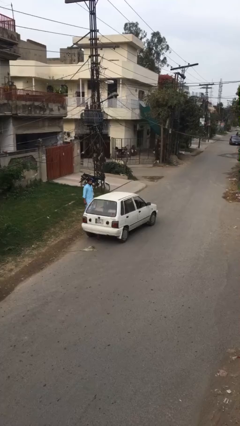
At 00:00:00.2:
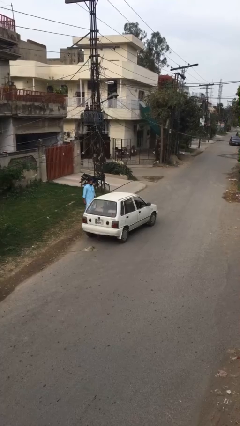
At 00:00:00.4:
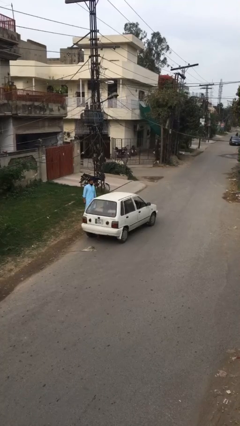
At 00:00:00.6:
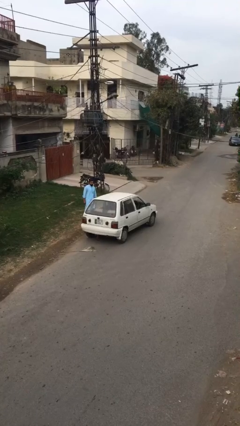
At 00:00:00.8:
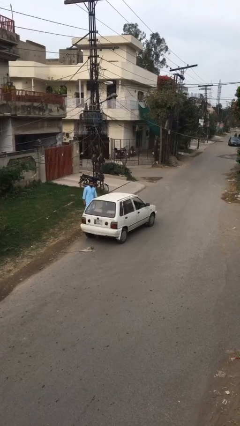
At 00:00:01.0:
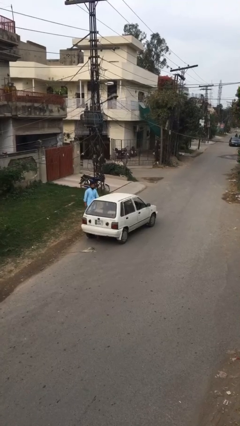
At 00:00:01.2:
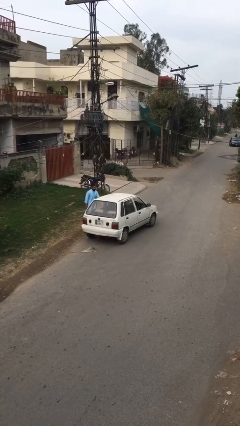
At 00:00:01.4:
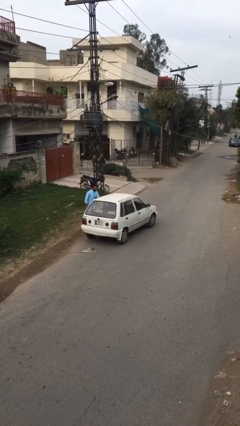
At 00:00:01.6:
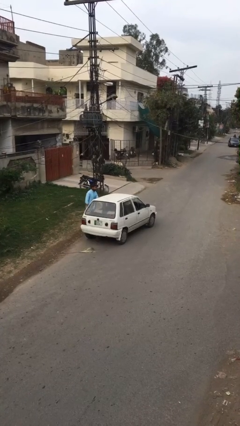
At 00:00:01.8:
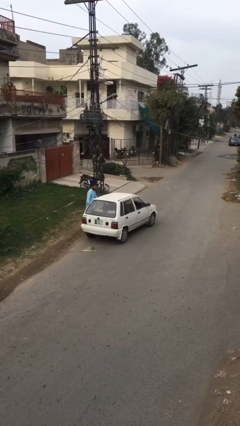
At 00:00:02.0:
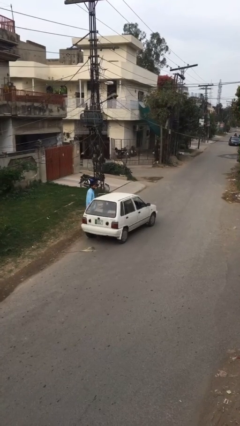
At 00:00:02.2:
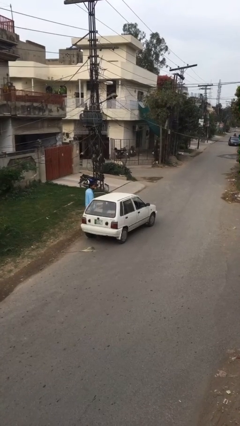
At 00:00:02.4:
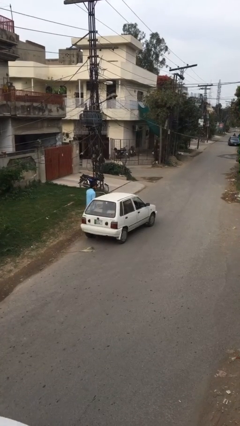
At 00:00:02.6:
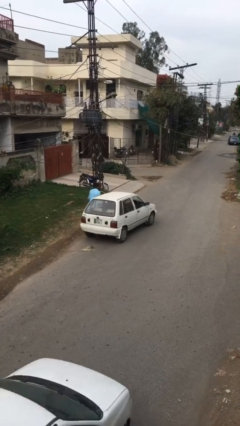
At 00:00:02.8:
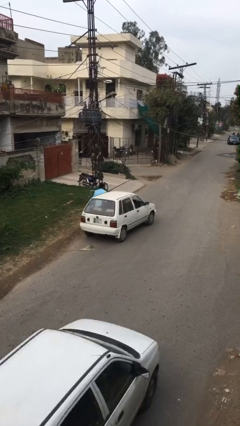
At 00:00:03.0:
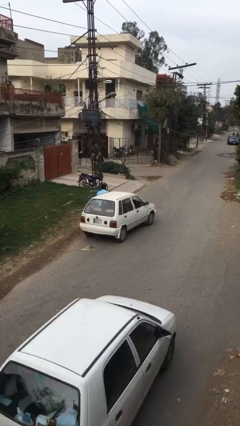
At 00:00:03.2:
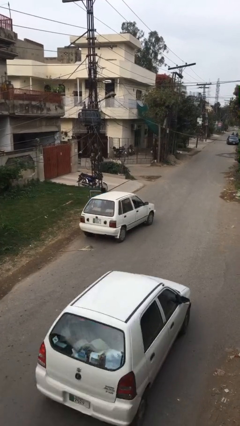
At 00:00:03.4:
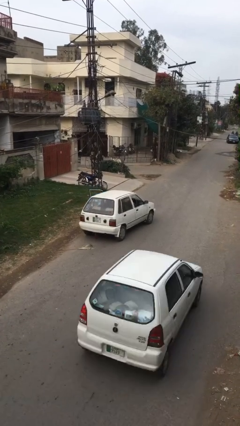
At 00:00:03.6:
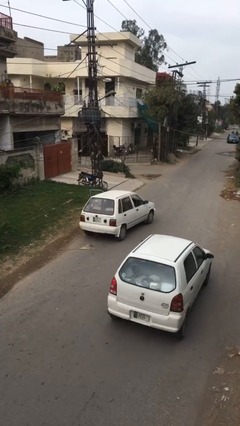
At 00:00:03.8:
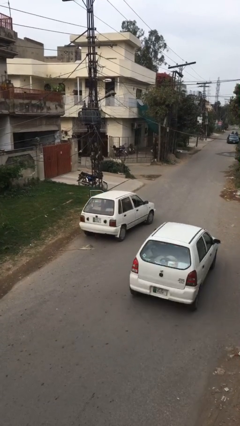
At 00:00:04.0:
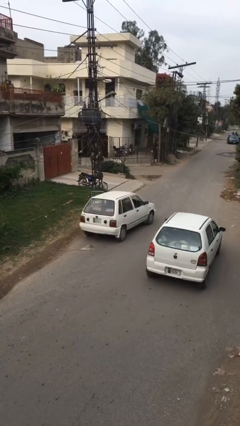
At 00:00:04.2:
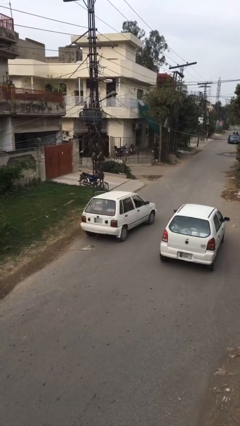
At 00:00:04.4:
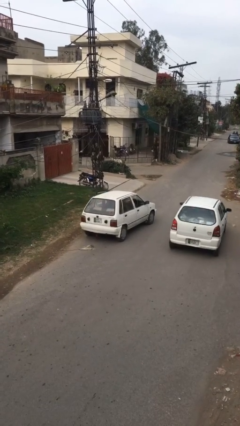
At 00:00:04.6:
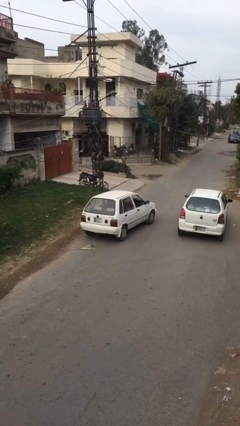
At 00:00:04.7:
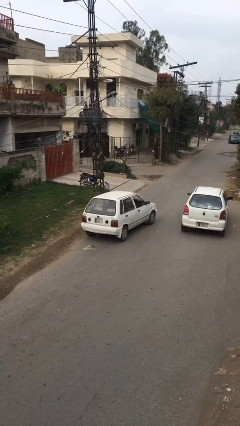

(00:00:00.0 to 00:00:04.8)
car picks up person

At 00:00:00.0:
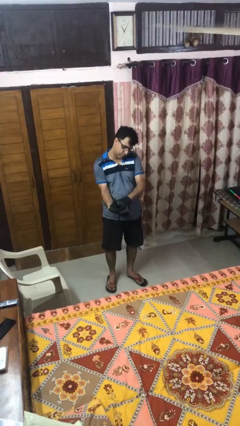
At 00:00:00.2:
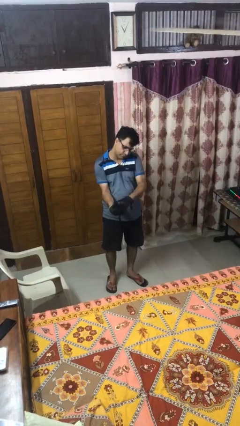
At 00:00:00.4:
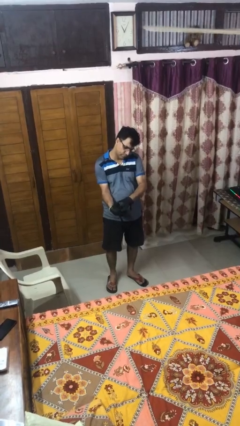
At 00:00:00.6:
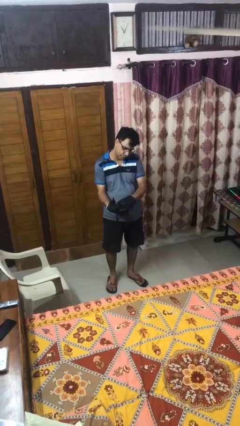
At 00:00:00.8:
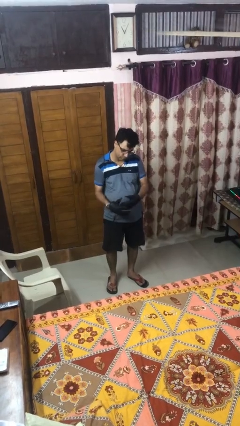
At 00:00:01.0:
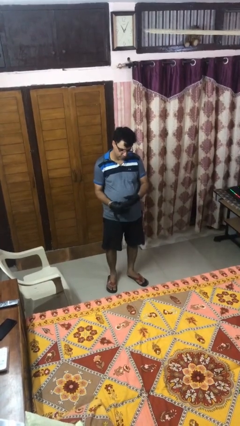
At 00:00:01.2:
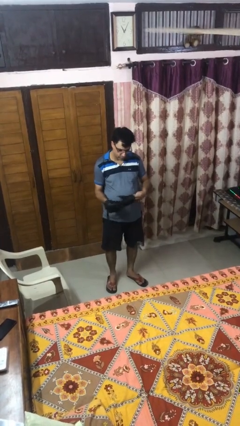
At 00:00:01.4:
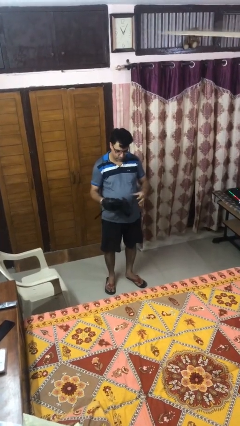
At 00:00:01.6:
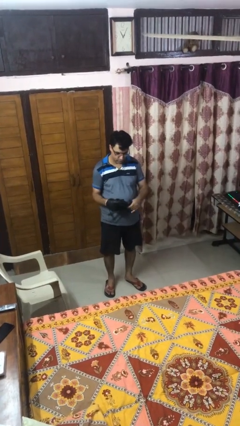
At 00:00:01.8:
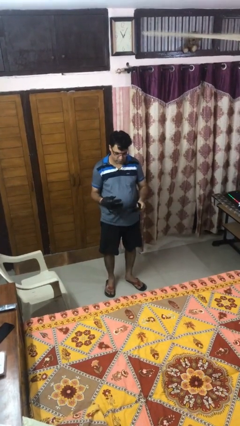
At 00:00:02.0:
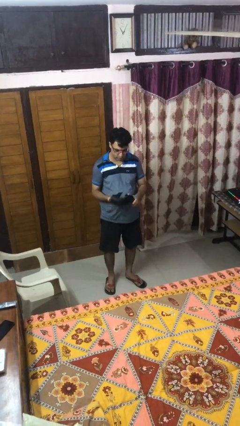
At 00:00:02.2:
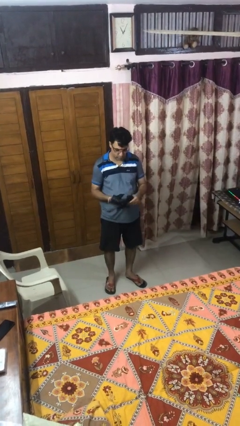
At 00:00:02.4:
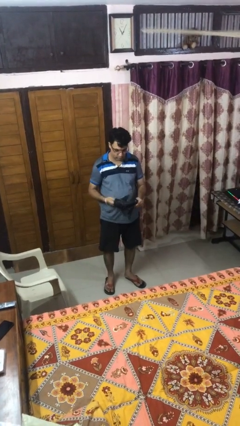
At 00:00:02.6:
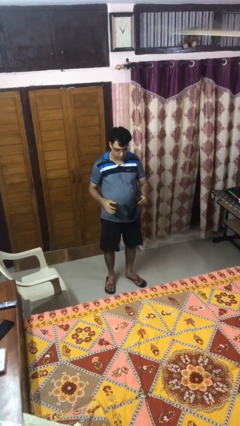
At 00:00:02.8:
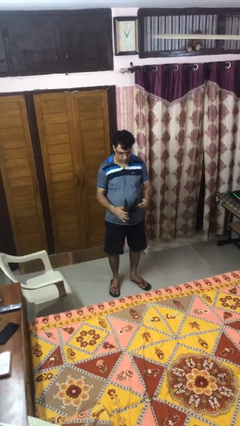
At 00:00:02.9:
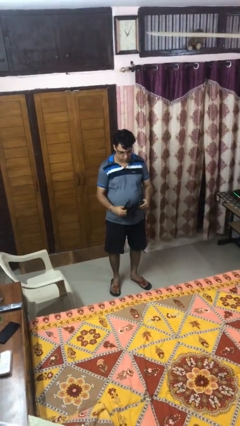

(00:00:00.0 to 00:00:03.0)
person takes off gloves

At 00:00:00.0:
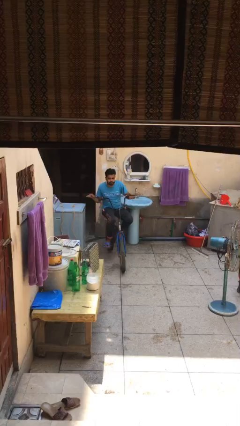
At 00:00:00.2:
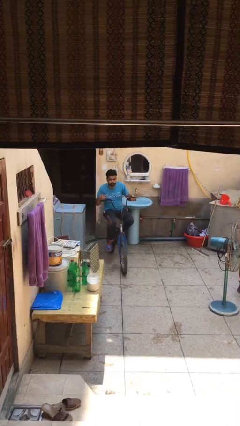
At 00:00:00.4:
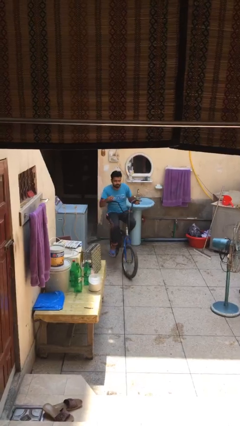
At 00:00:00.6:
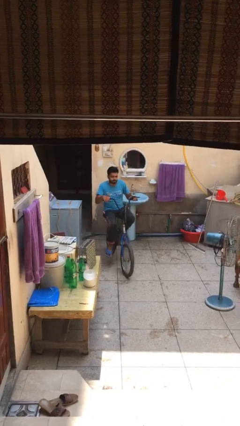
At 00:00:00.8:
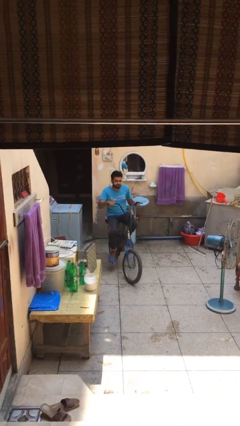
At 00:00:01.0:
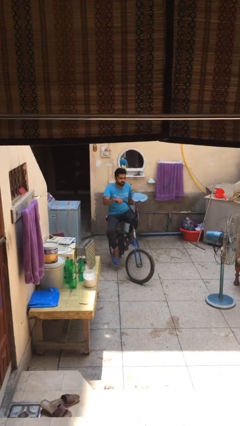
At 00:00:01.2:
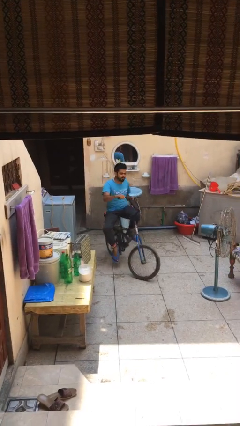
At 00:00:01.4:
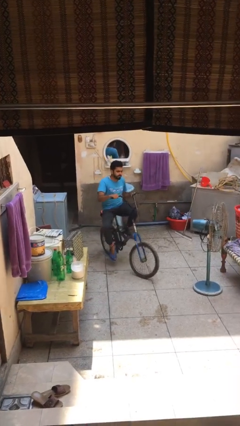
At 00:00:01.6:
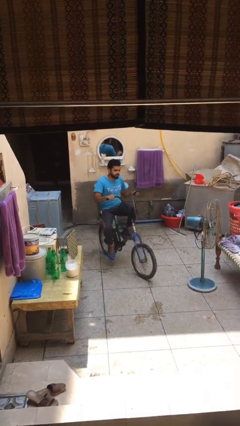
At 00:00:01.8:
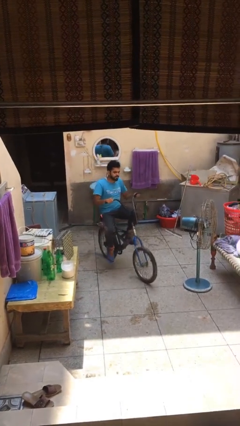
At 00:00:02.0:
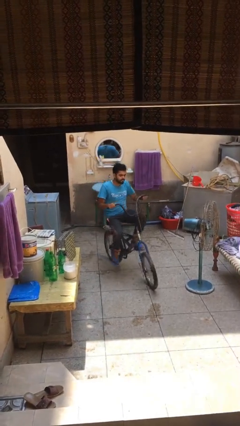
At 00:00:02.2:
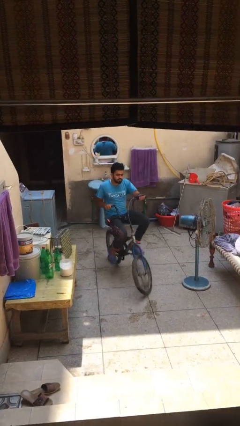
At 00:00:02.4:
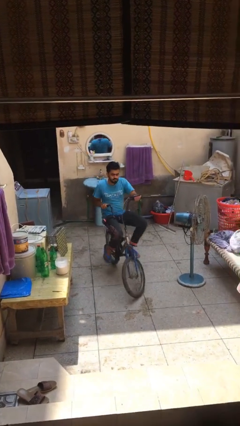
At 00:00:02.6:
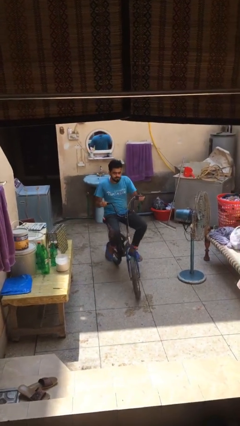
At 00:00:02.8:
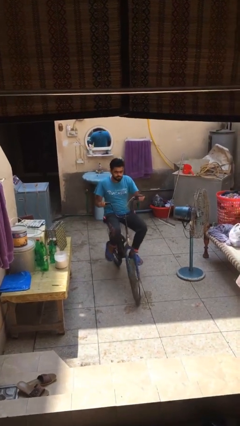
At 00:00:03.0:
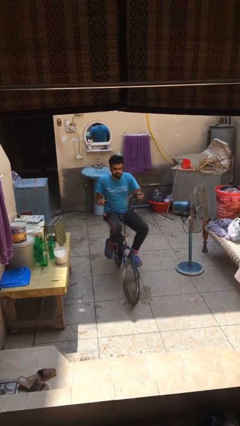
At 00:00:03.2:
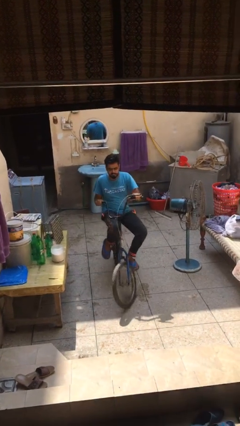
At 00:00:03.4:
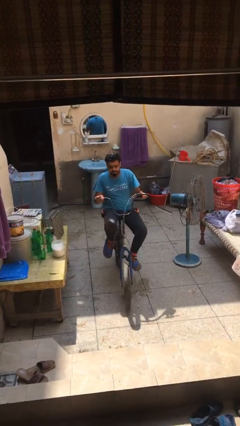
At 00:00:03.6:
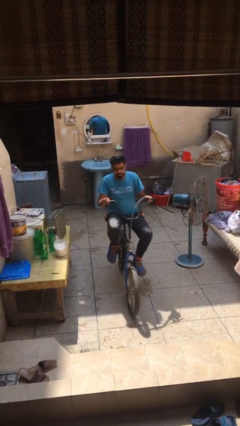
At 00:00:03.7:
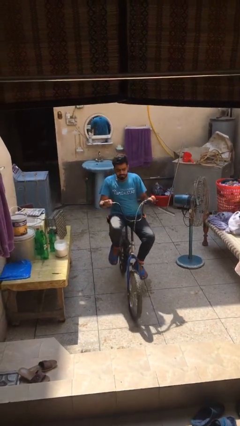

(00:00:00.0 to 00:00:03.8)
person rides bicycle

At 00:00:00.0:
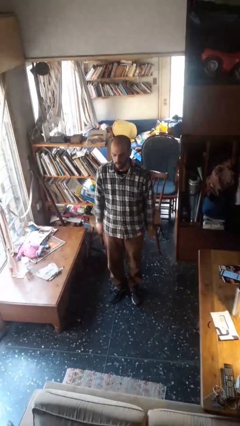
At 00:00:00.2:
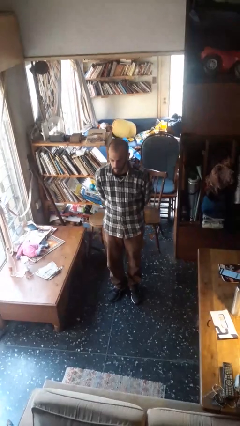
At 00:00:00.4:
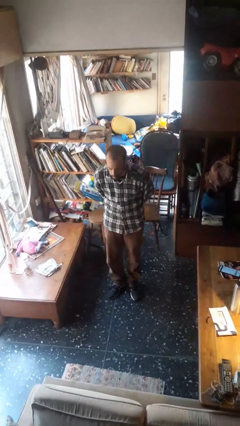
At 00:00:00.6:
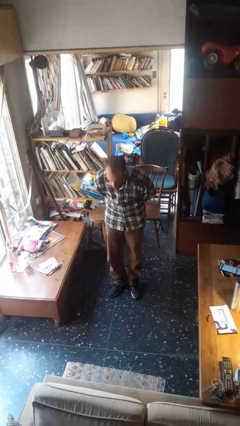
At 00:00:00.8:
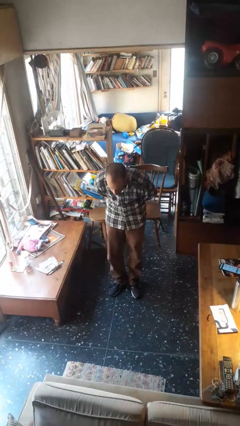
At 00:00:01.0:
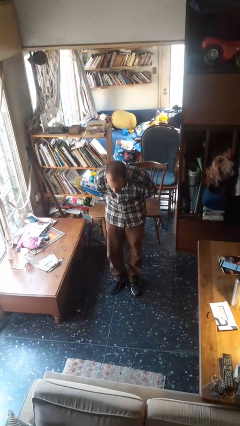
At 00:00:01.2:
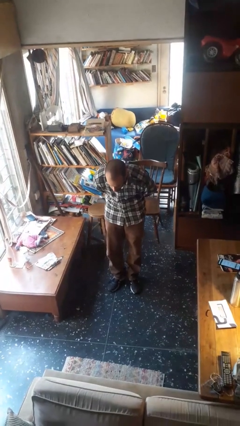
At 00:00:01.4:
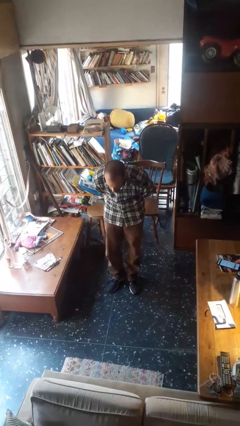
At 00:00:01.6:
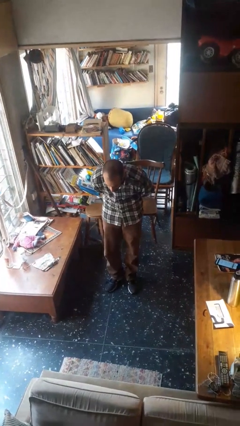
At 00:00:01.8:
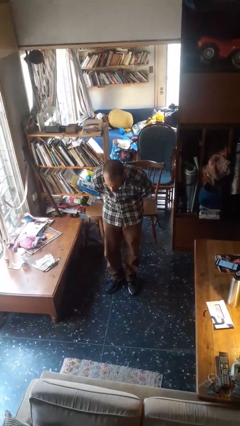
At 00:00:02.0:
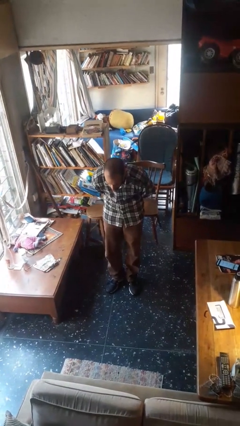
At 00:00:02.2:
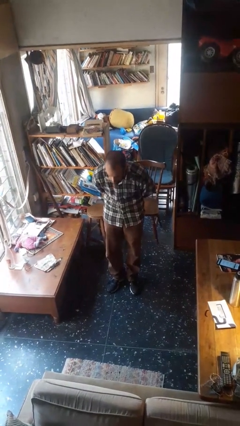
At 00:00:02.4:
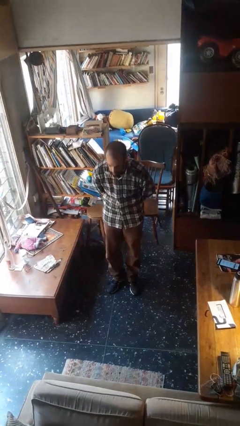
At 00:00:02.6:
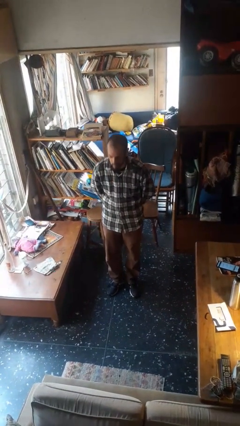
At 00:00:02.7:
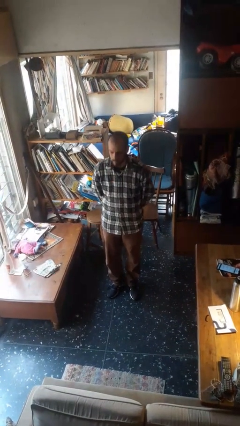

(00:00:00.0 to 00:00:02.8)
person bows

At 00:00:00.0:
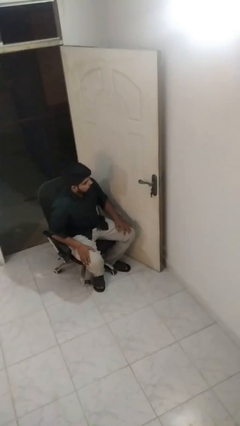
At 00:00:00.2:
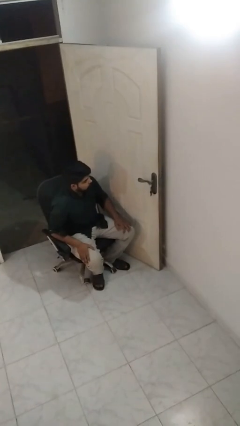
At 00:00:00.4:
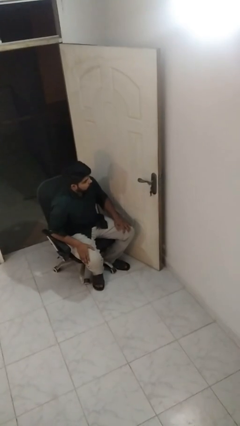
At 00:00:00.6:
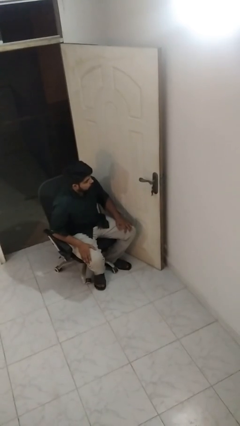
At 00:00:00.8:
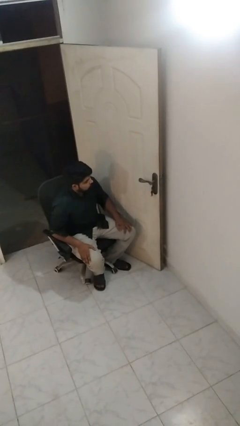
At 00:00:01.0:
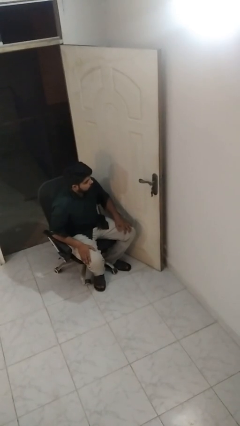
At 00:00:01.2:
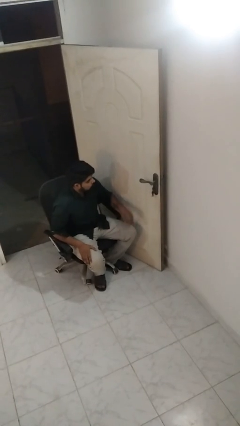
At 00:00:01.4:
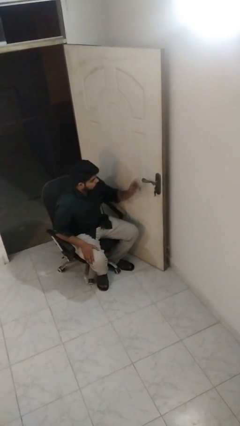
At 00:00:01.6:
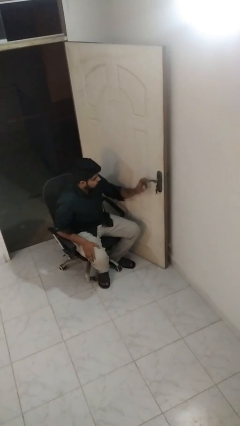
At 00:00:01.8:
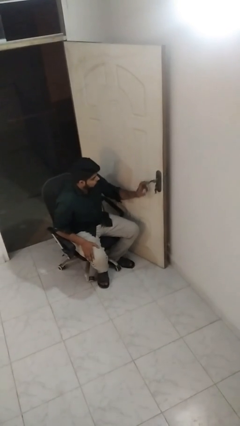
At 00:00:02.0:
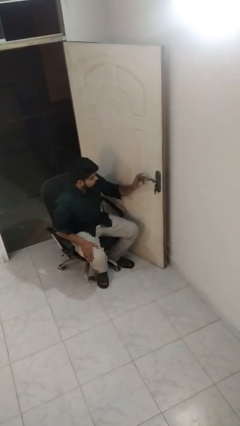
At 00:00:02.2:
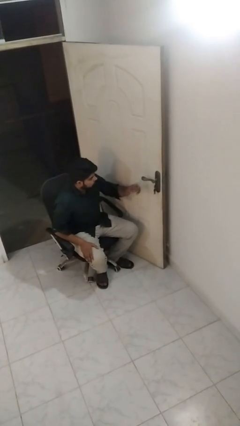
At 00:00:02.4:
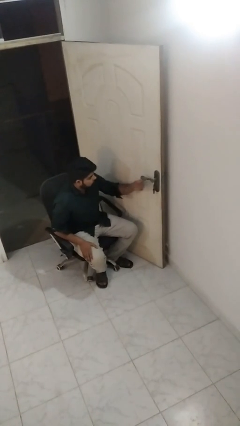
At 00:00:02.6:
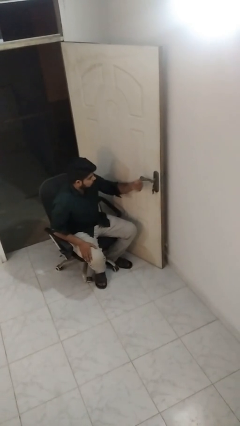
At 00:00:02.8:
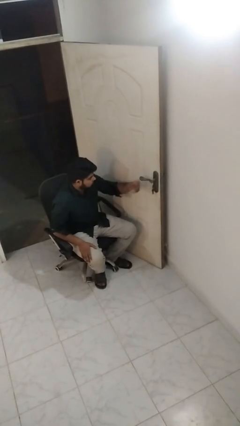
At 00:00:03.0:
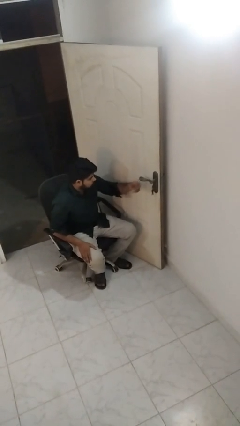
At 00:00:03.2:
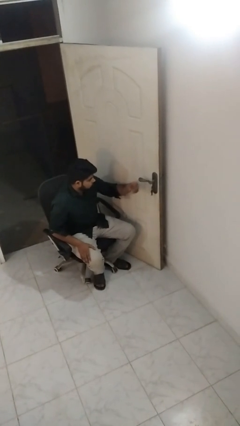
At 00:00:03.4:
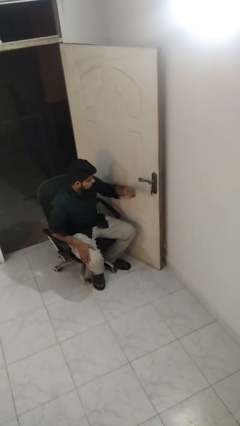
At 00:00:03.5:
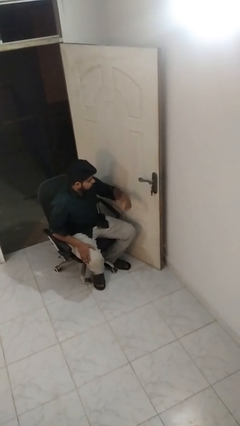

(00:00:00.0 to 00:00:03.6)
person taps object with finger
